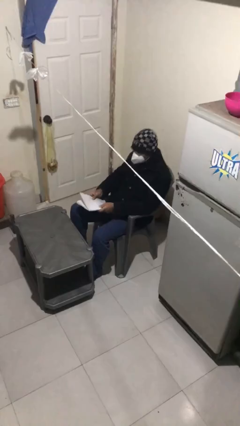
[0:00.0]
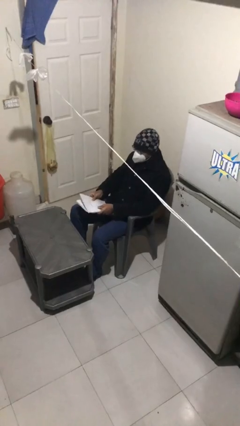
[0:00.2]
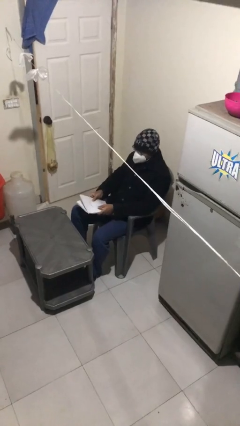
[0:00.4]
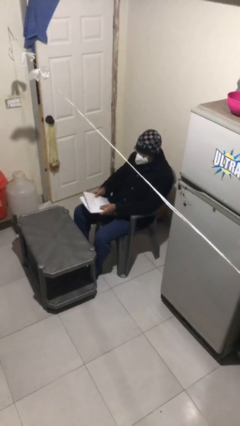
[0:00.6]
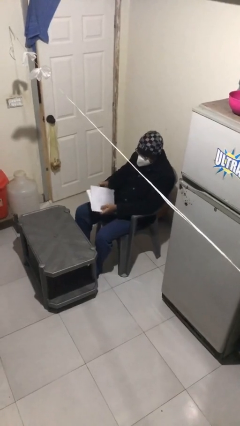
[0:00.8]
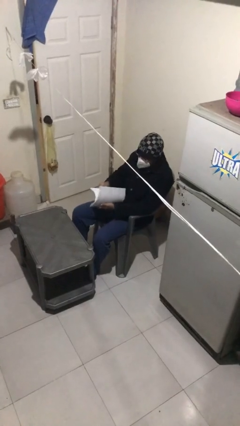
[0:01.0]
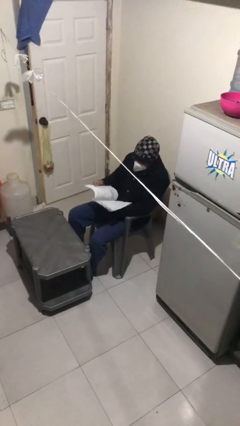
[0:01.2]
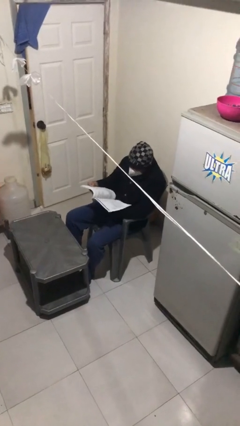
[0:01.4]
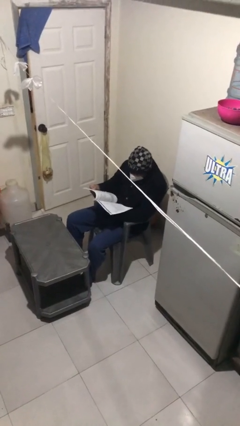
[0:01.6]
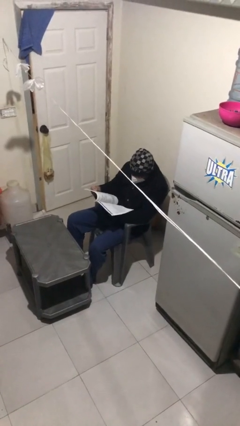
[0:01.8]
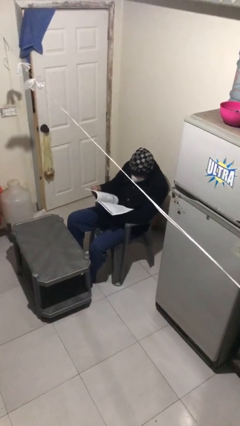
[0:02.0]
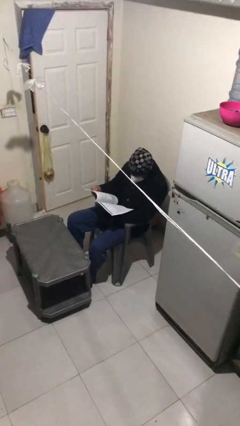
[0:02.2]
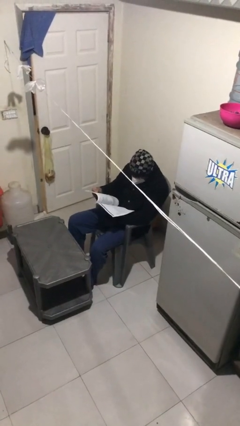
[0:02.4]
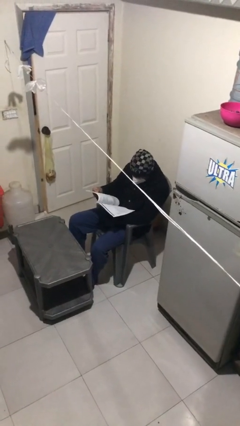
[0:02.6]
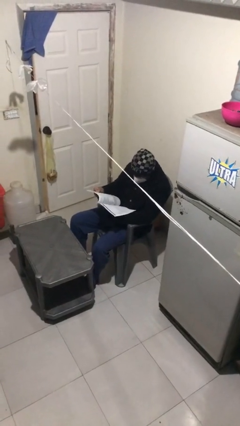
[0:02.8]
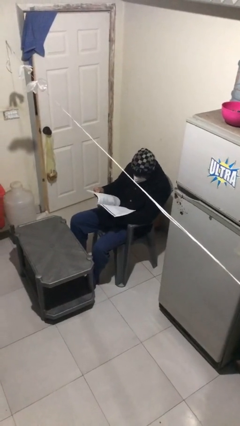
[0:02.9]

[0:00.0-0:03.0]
person reads document

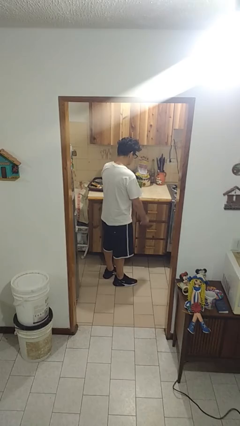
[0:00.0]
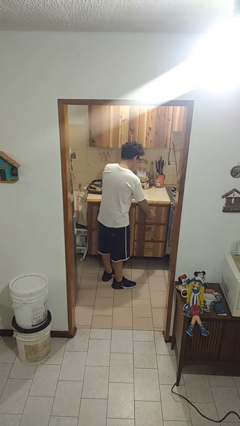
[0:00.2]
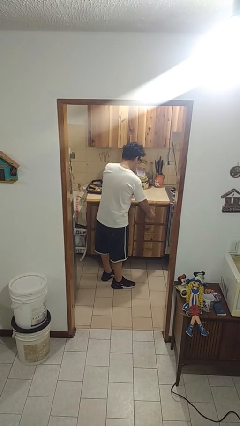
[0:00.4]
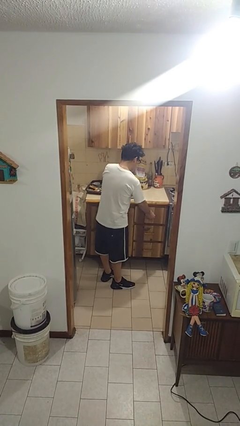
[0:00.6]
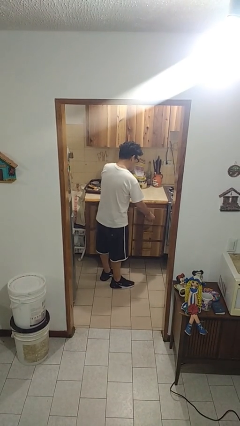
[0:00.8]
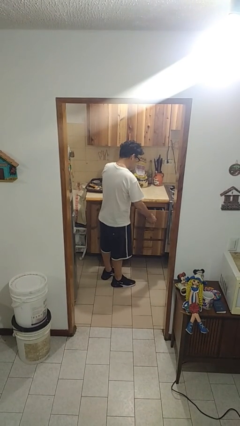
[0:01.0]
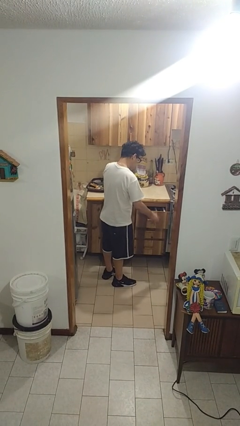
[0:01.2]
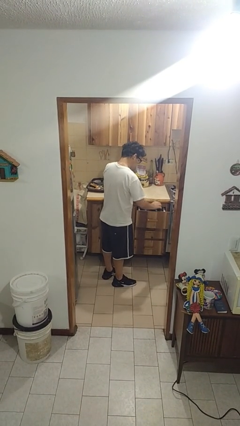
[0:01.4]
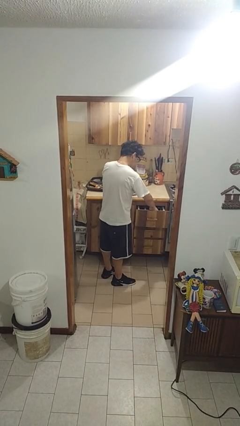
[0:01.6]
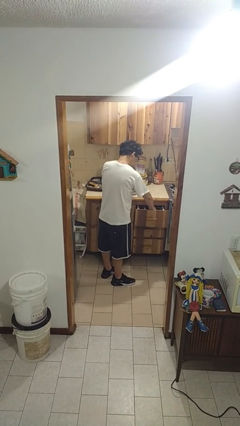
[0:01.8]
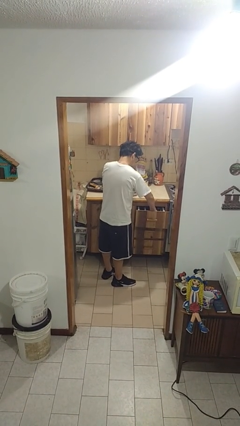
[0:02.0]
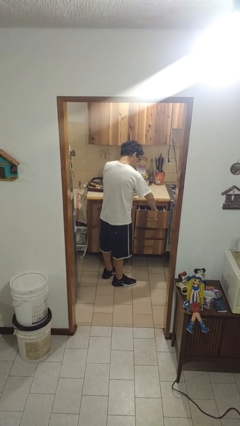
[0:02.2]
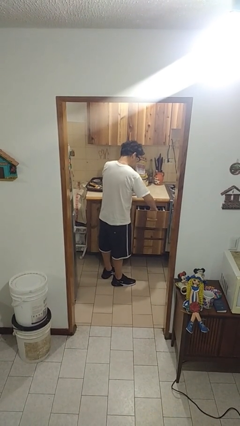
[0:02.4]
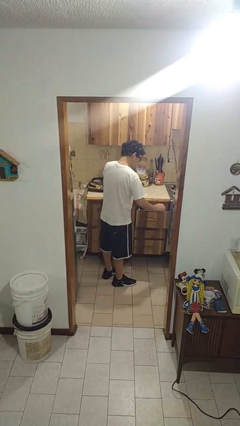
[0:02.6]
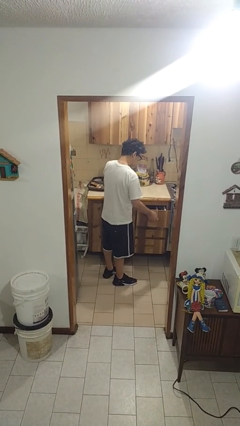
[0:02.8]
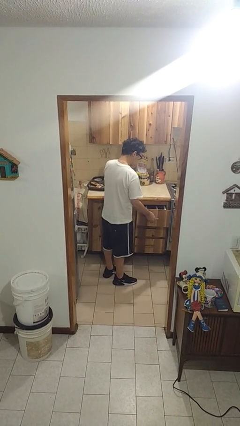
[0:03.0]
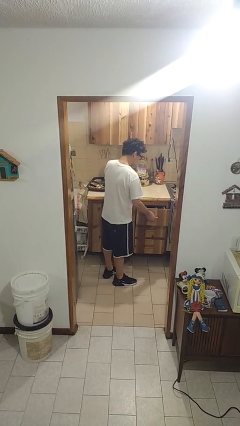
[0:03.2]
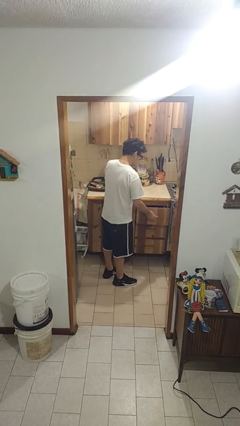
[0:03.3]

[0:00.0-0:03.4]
person searches in kitchen drawer

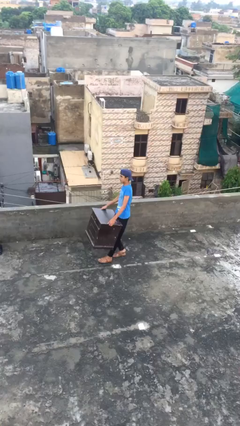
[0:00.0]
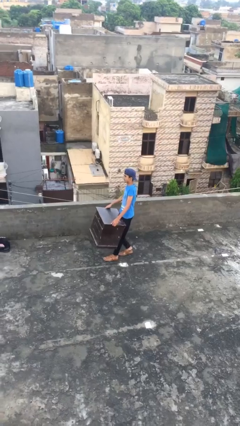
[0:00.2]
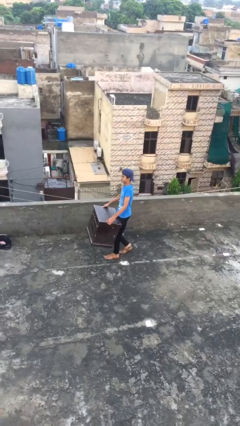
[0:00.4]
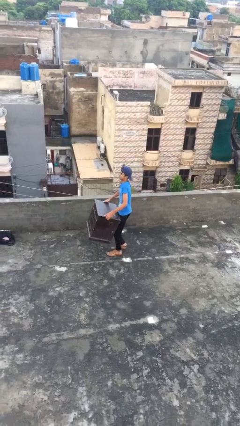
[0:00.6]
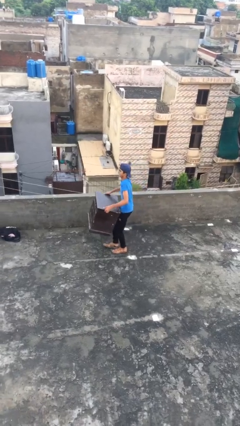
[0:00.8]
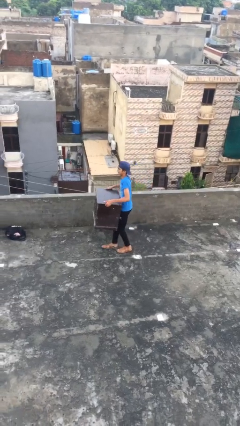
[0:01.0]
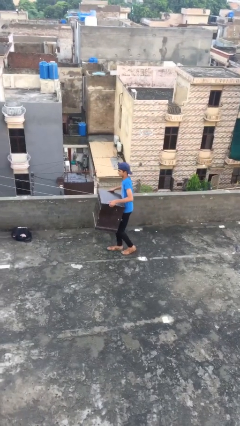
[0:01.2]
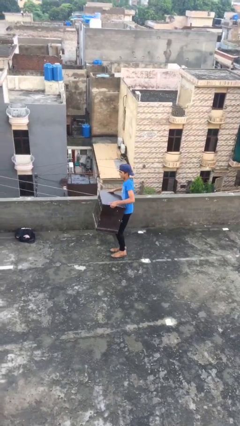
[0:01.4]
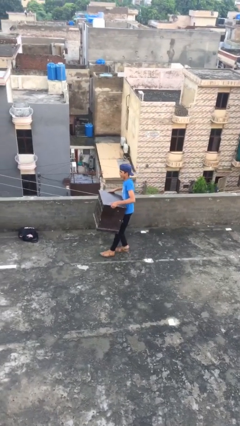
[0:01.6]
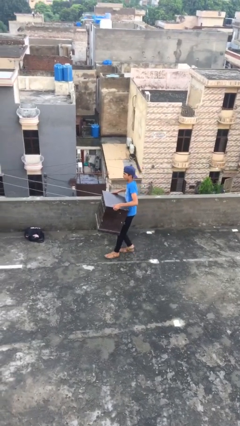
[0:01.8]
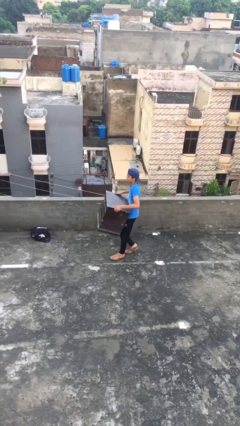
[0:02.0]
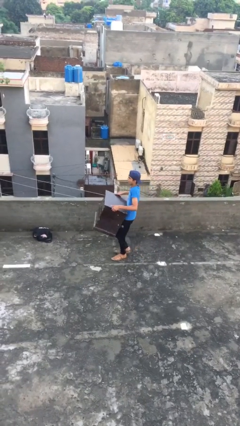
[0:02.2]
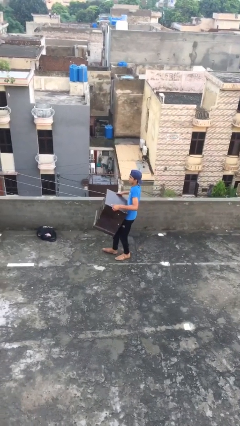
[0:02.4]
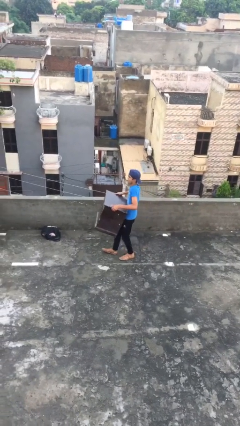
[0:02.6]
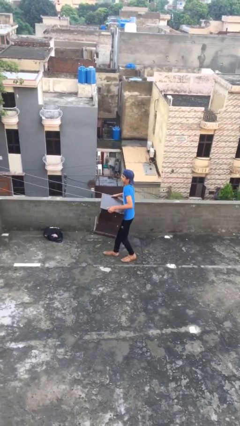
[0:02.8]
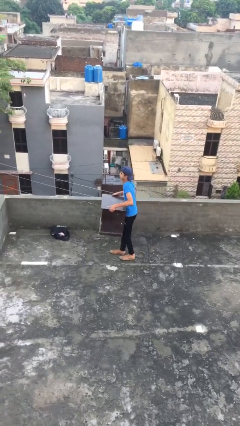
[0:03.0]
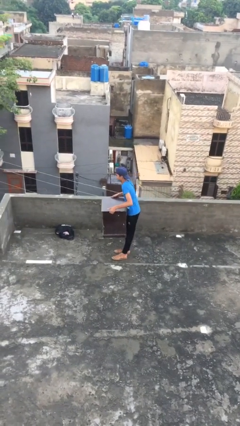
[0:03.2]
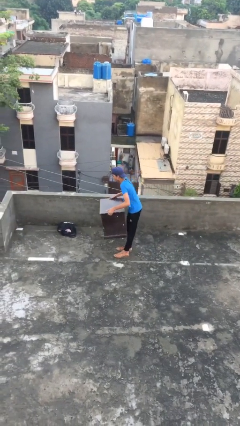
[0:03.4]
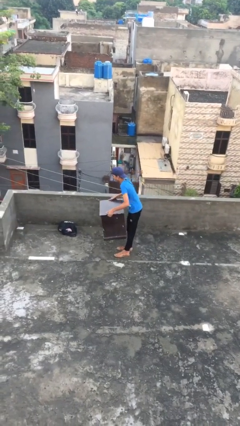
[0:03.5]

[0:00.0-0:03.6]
person carries heavy object

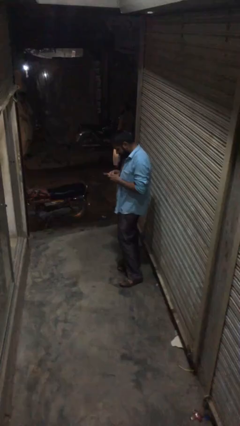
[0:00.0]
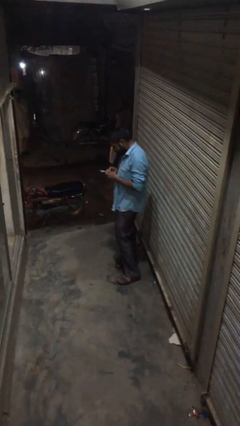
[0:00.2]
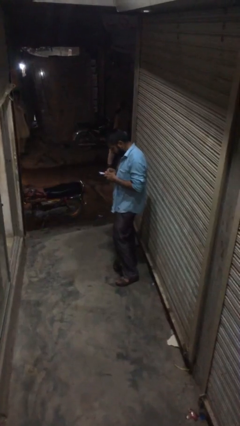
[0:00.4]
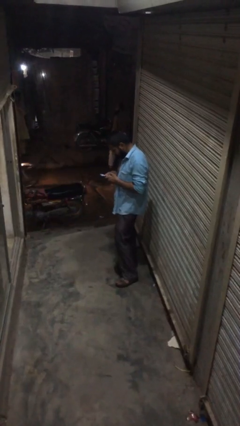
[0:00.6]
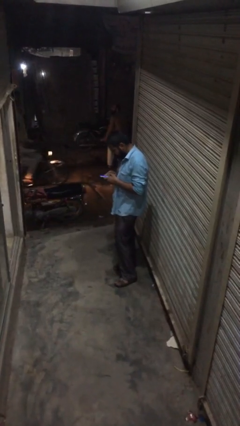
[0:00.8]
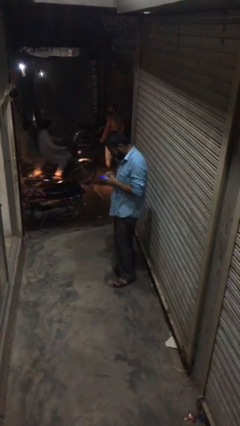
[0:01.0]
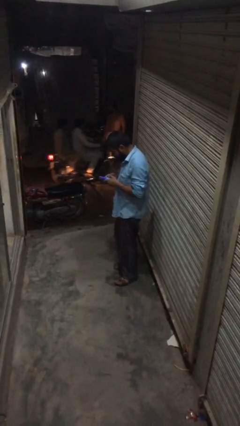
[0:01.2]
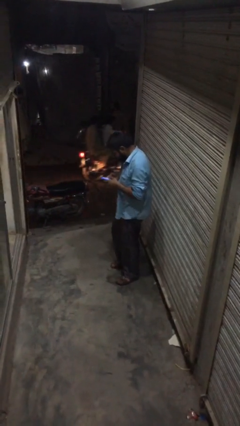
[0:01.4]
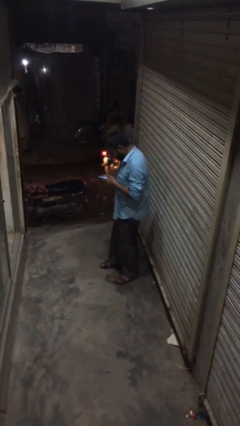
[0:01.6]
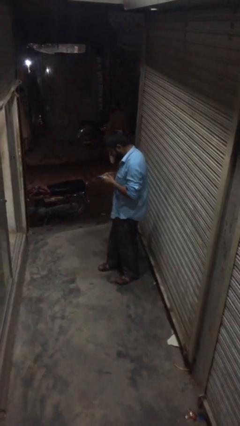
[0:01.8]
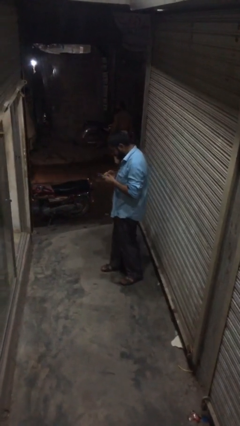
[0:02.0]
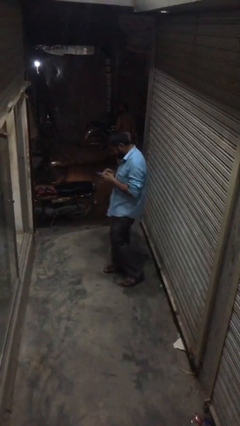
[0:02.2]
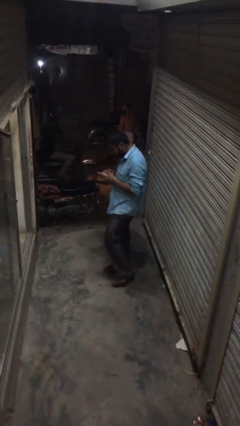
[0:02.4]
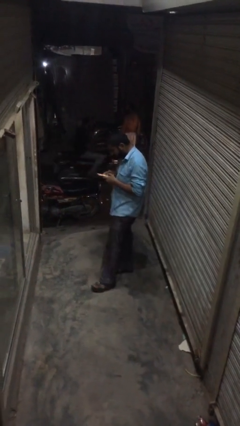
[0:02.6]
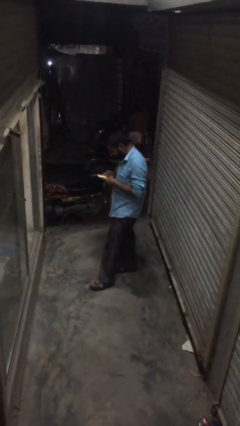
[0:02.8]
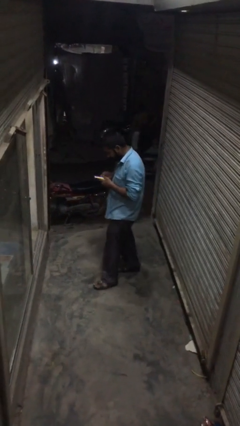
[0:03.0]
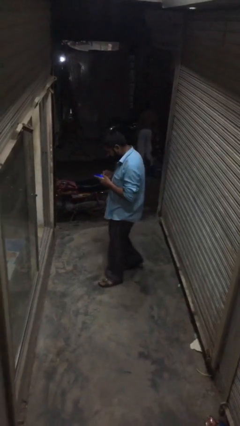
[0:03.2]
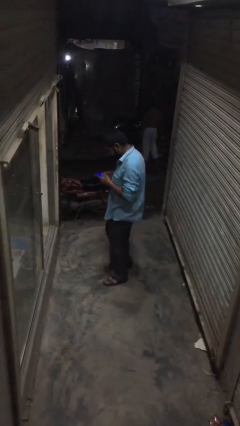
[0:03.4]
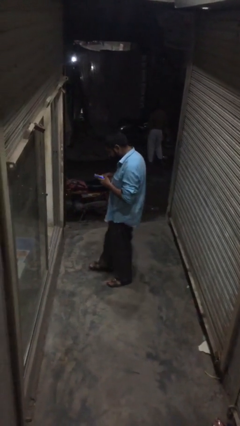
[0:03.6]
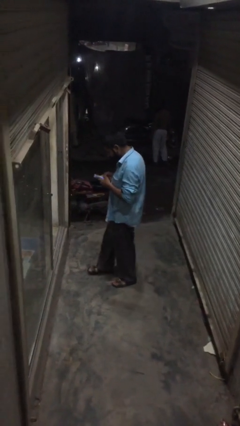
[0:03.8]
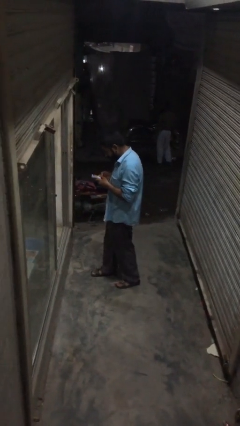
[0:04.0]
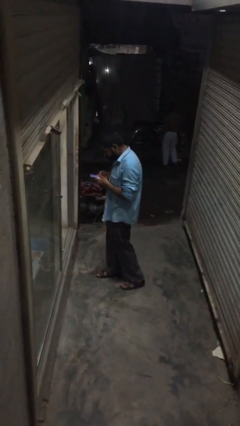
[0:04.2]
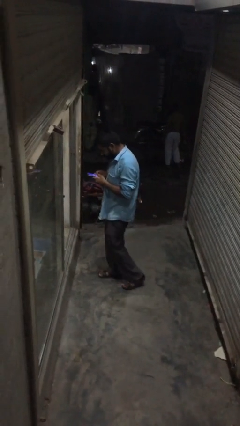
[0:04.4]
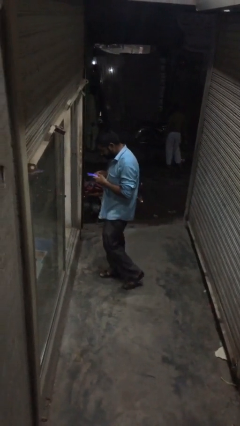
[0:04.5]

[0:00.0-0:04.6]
person texts on phone

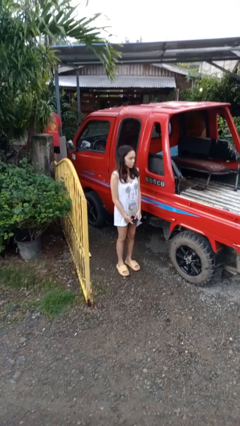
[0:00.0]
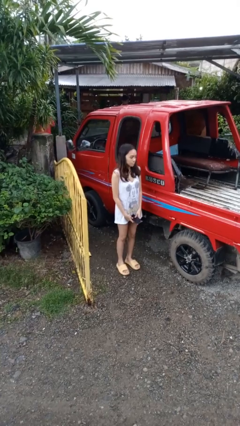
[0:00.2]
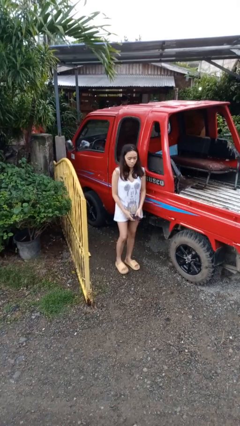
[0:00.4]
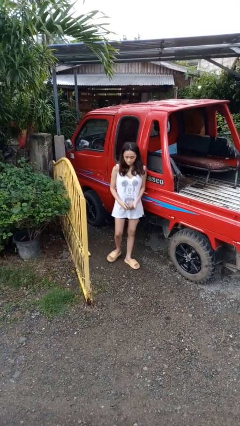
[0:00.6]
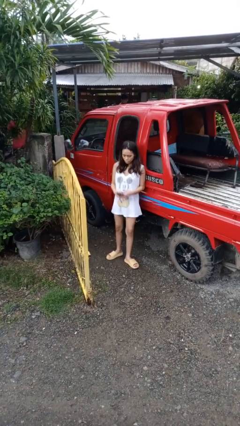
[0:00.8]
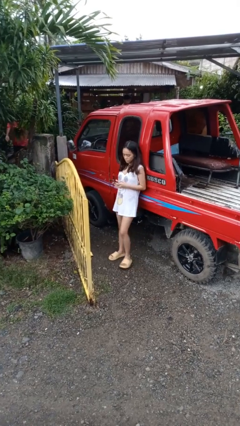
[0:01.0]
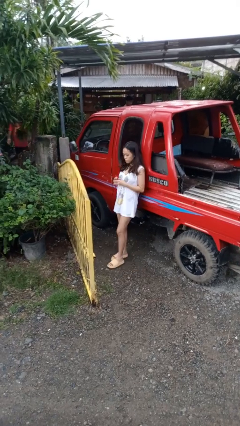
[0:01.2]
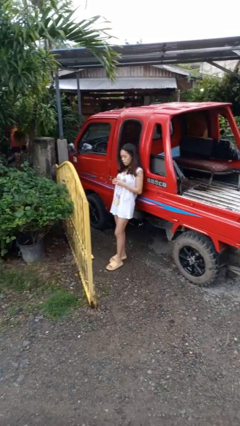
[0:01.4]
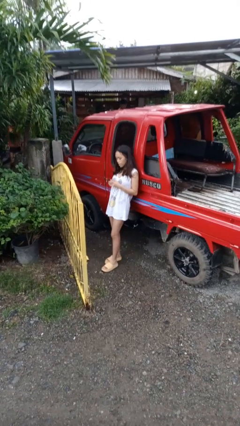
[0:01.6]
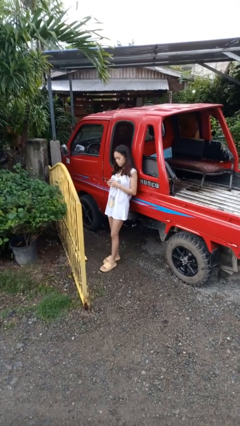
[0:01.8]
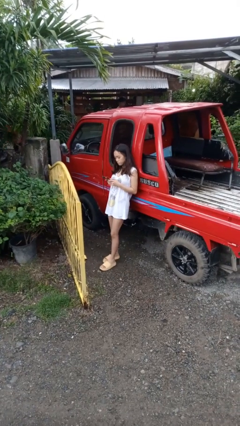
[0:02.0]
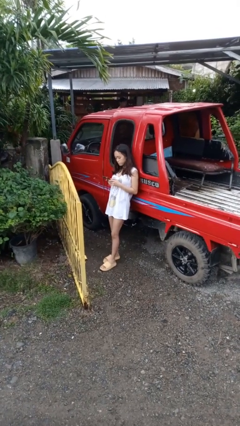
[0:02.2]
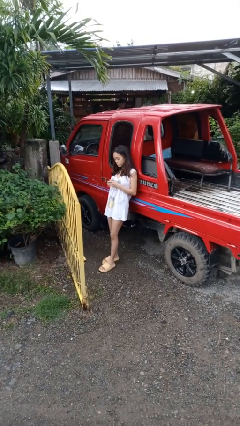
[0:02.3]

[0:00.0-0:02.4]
person leans against car

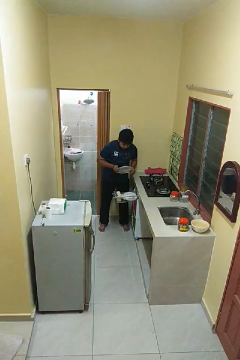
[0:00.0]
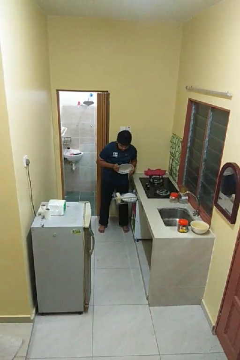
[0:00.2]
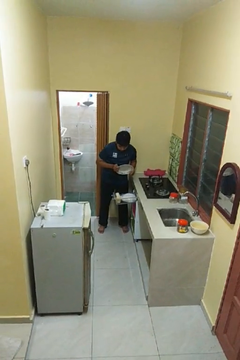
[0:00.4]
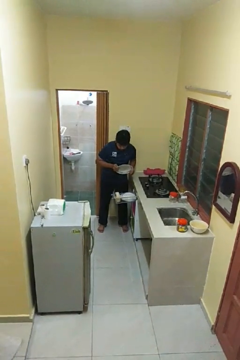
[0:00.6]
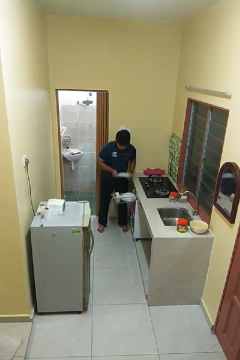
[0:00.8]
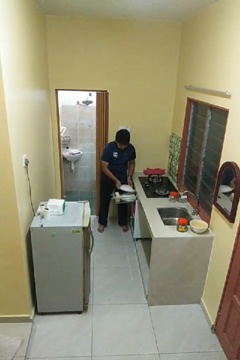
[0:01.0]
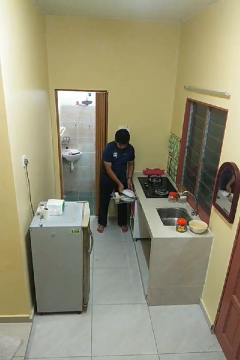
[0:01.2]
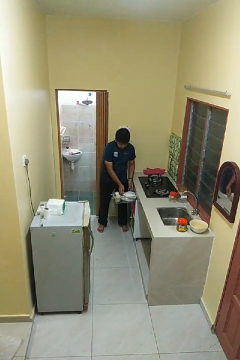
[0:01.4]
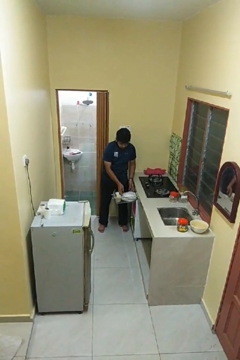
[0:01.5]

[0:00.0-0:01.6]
person puts object into kitchen drawer
